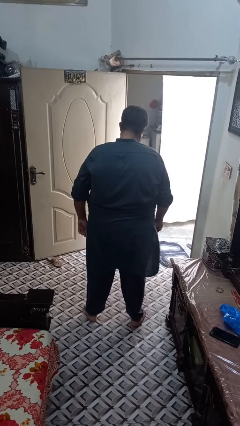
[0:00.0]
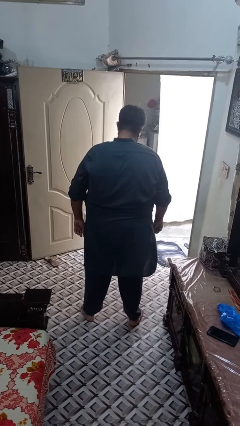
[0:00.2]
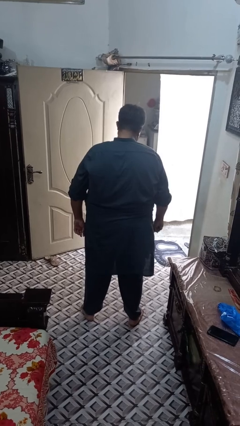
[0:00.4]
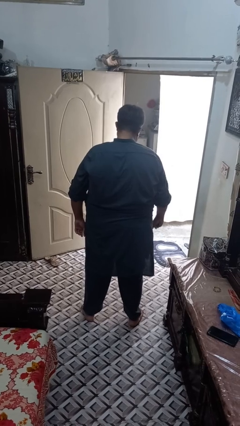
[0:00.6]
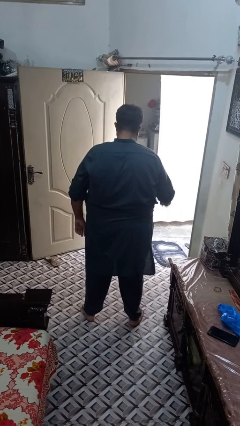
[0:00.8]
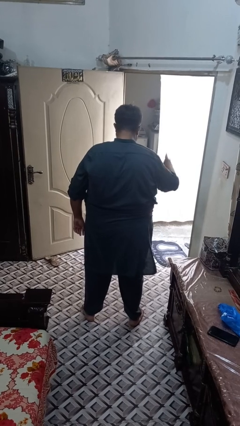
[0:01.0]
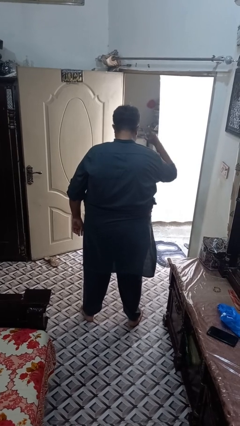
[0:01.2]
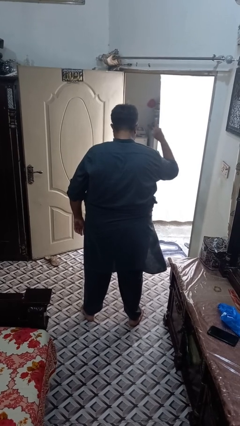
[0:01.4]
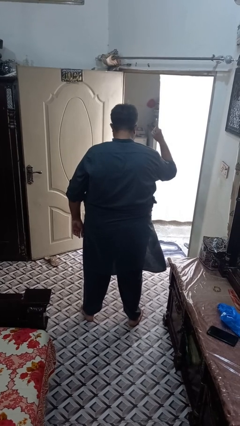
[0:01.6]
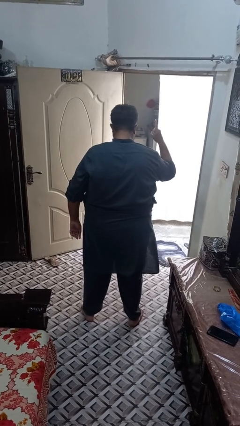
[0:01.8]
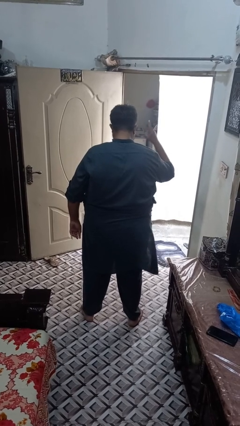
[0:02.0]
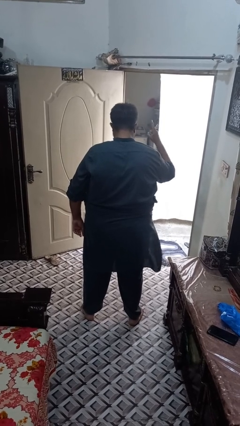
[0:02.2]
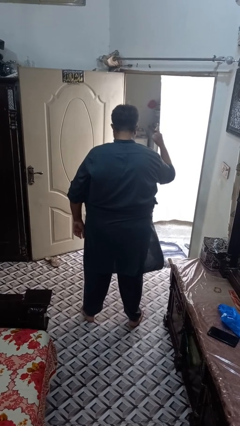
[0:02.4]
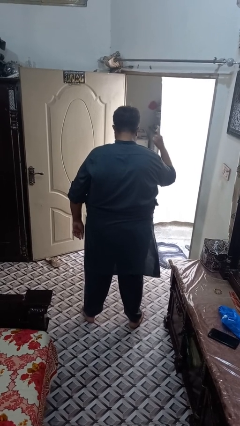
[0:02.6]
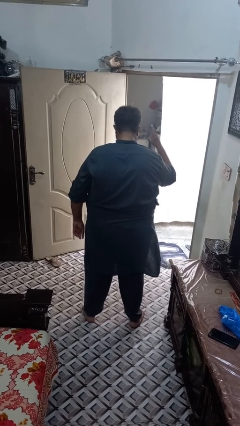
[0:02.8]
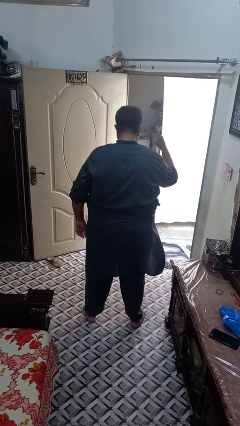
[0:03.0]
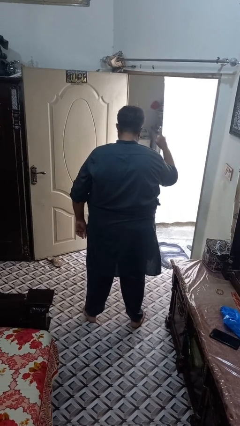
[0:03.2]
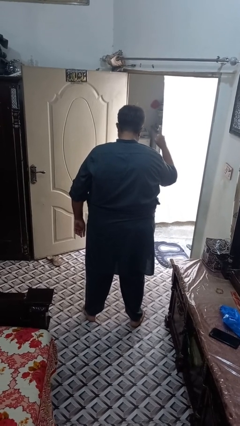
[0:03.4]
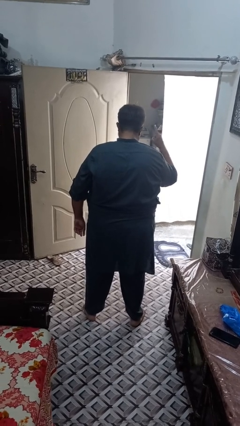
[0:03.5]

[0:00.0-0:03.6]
person gestures number one

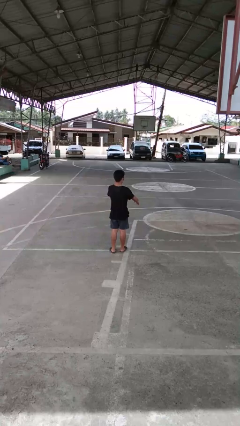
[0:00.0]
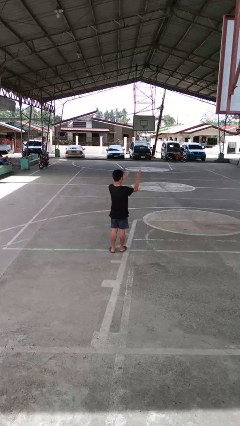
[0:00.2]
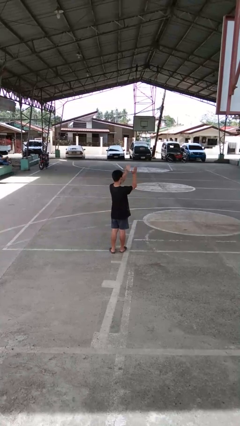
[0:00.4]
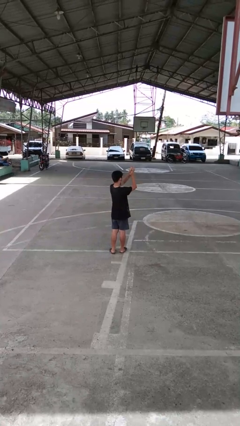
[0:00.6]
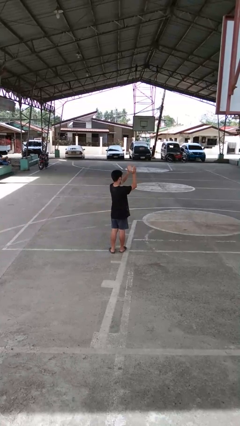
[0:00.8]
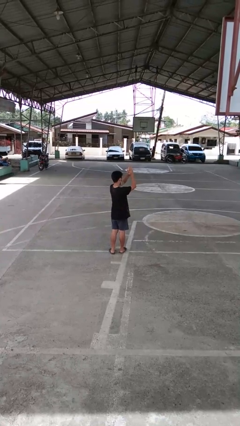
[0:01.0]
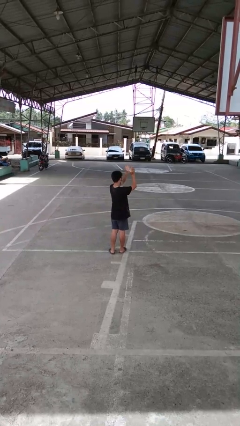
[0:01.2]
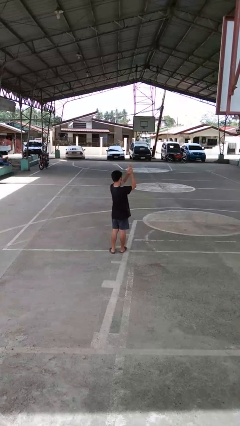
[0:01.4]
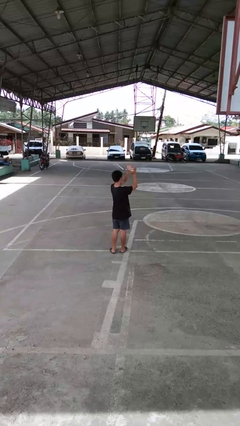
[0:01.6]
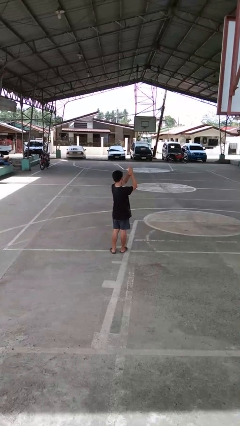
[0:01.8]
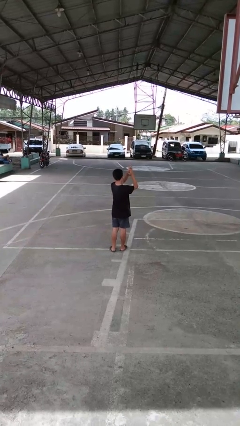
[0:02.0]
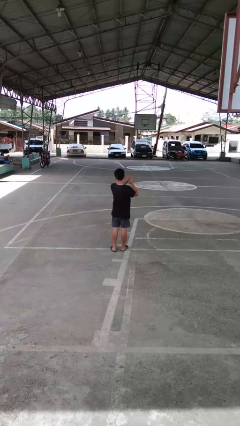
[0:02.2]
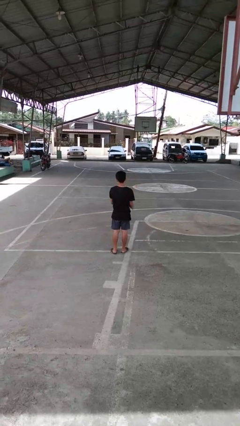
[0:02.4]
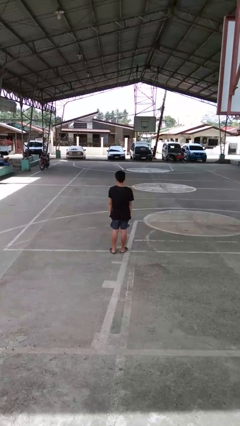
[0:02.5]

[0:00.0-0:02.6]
person claps hands

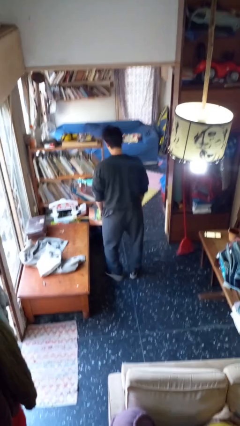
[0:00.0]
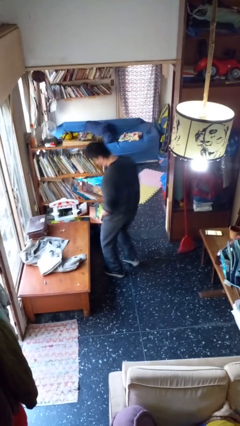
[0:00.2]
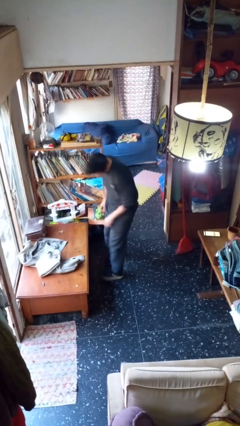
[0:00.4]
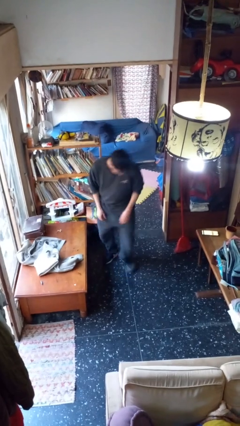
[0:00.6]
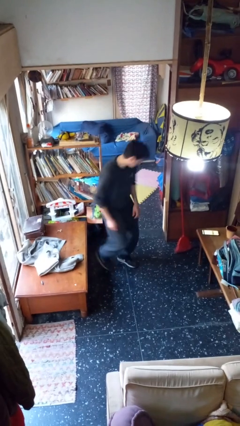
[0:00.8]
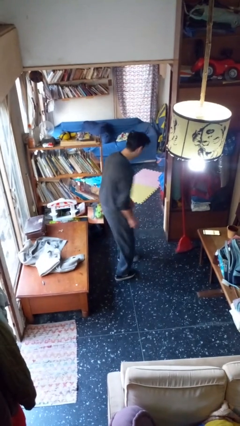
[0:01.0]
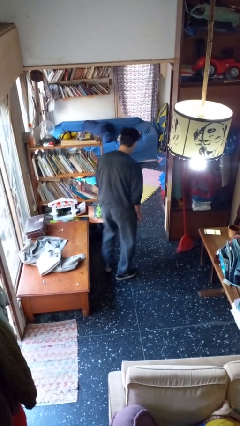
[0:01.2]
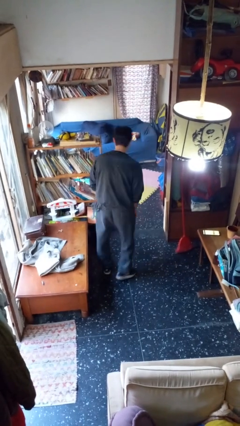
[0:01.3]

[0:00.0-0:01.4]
person twirls

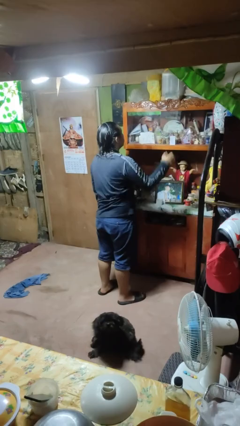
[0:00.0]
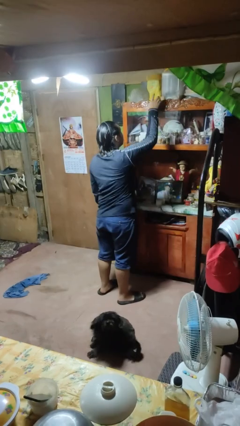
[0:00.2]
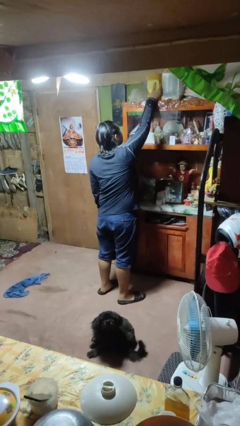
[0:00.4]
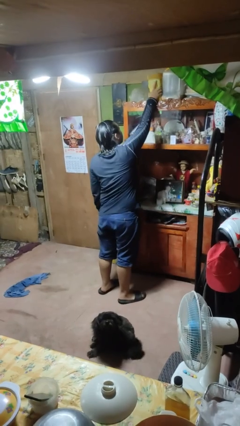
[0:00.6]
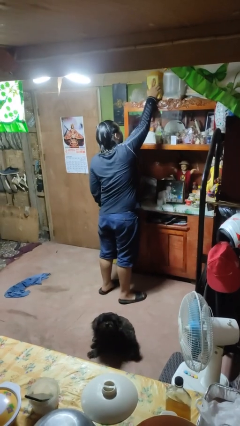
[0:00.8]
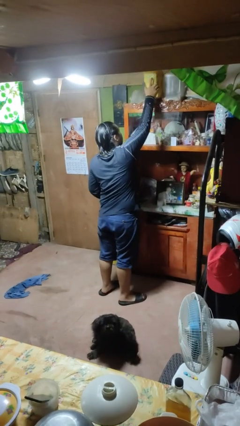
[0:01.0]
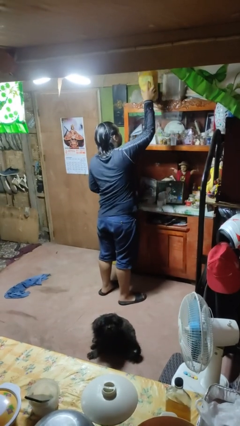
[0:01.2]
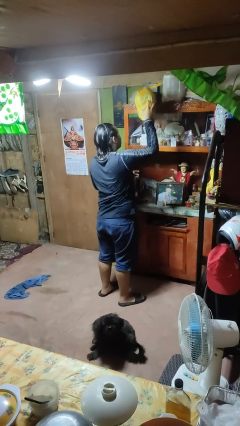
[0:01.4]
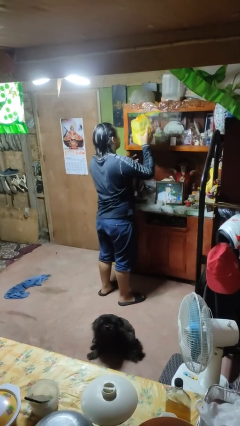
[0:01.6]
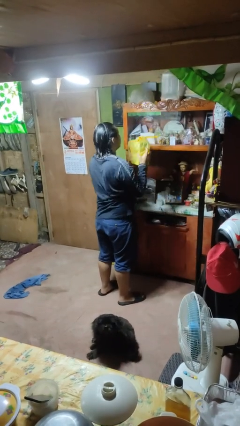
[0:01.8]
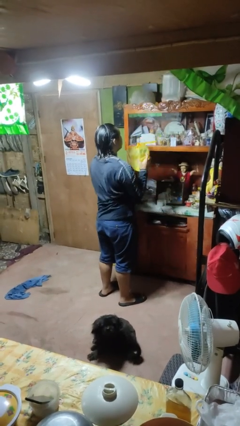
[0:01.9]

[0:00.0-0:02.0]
person picks up object from shelf

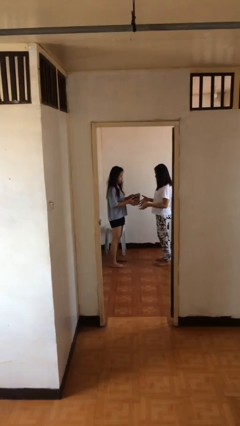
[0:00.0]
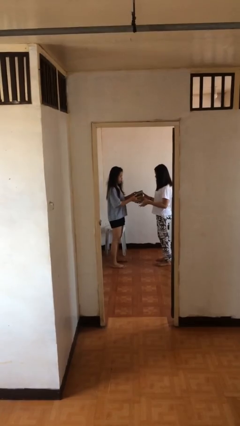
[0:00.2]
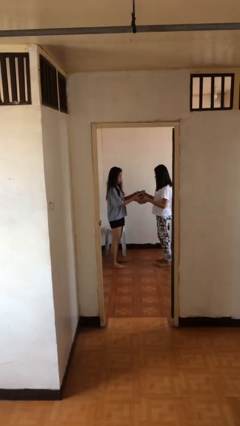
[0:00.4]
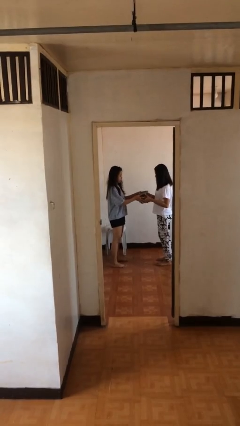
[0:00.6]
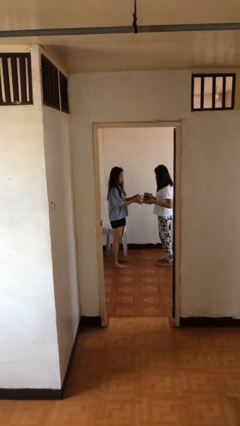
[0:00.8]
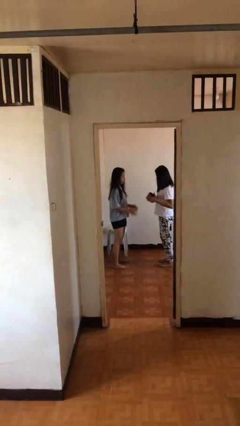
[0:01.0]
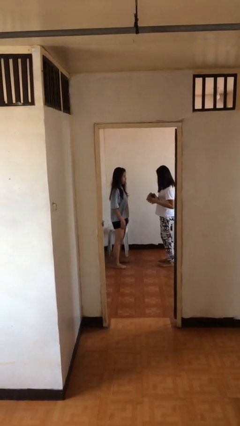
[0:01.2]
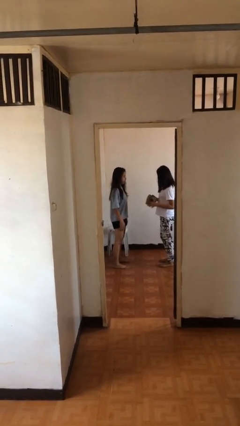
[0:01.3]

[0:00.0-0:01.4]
person transfers object to person

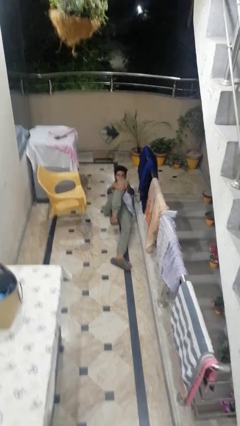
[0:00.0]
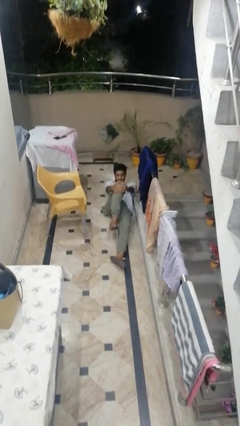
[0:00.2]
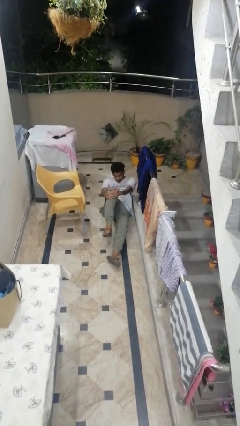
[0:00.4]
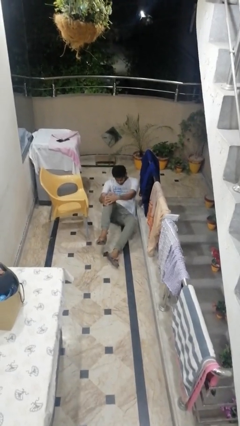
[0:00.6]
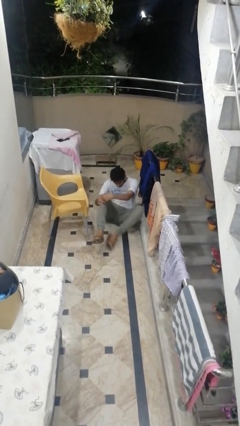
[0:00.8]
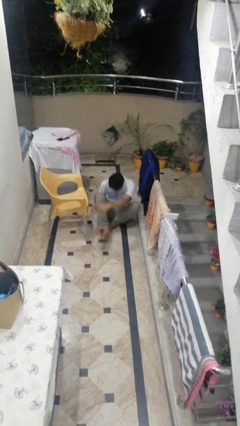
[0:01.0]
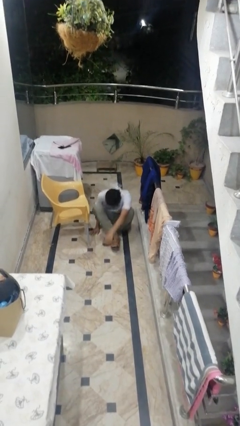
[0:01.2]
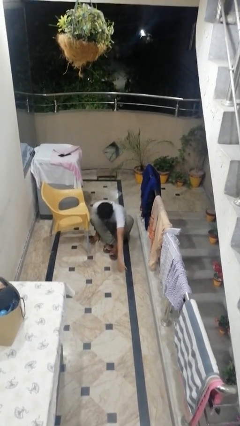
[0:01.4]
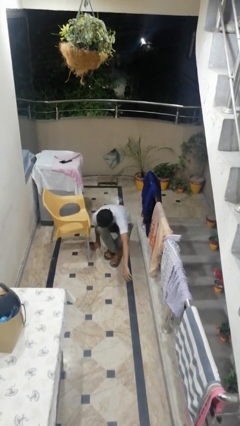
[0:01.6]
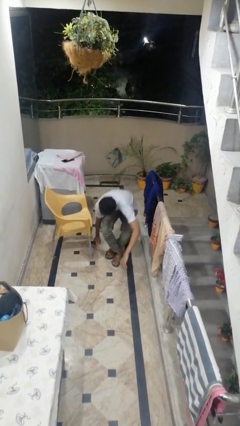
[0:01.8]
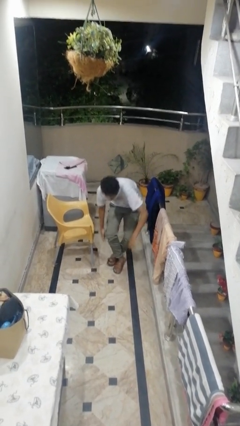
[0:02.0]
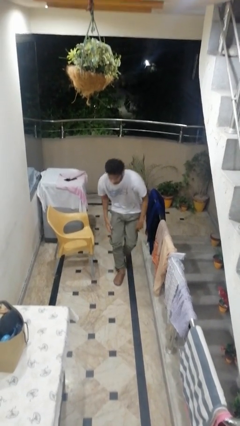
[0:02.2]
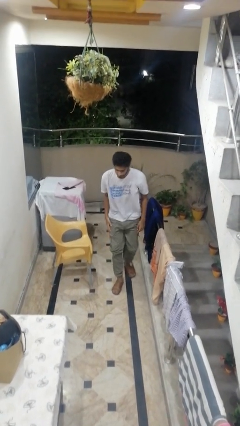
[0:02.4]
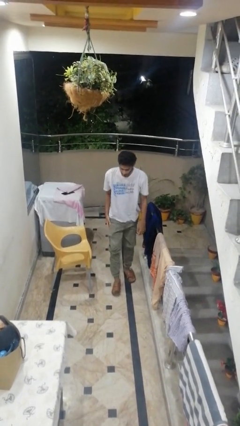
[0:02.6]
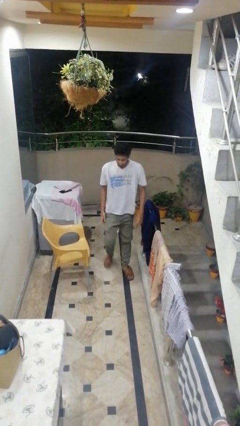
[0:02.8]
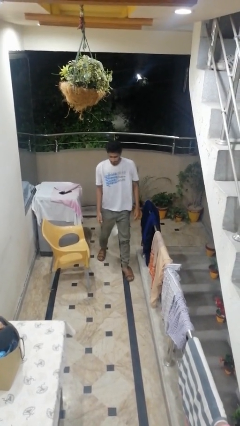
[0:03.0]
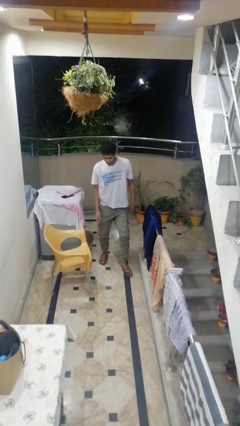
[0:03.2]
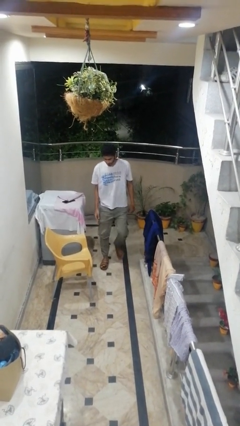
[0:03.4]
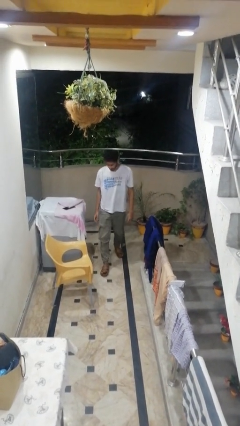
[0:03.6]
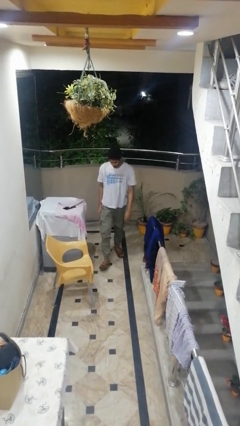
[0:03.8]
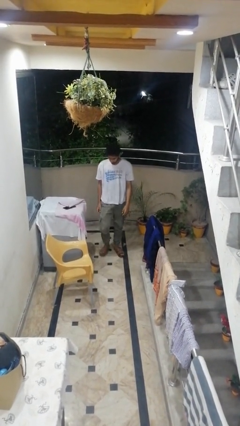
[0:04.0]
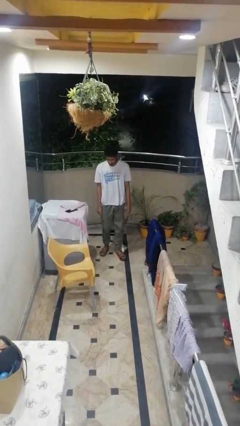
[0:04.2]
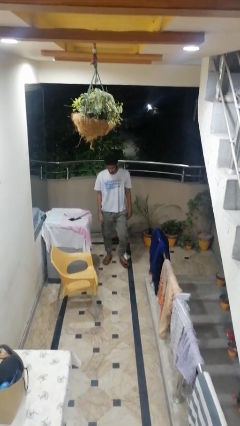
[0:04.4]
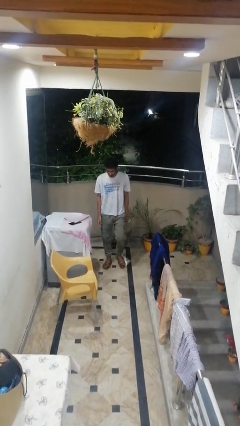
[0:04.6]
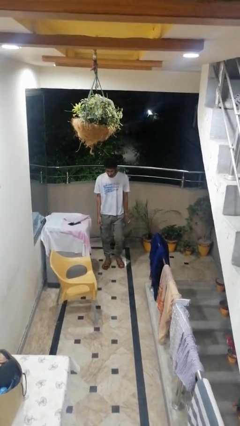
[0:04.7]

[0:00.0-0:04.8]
person stands up from floor

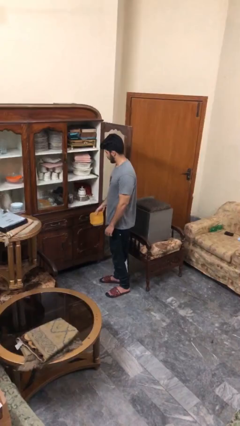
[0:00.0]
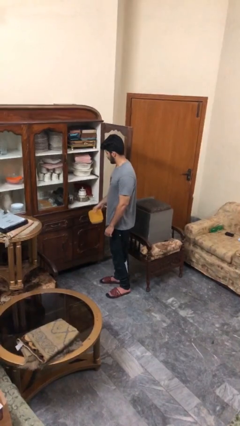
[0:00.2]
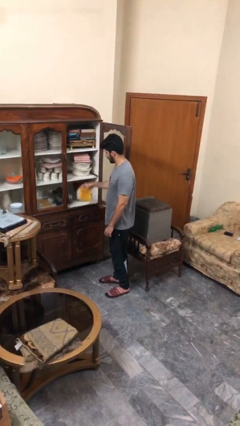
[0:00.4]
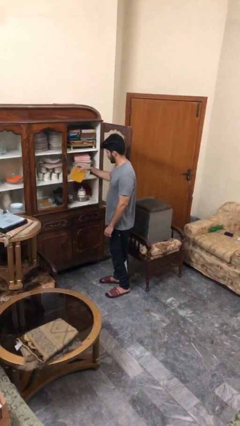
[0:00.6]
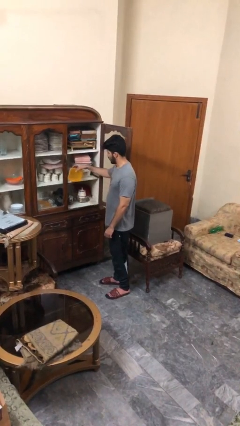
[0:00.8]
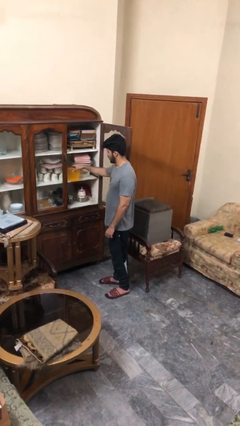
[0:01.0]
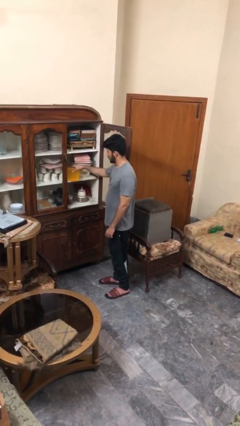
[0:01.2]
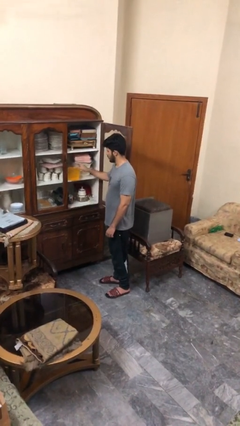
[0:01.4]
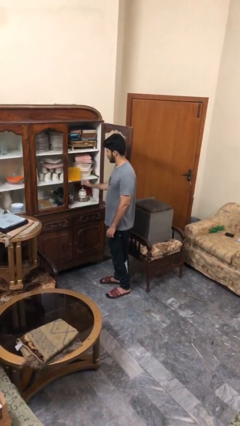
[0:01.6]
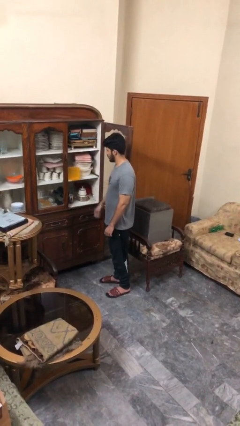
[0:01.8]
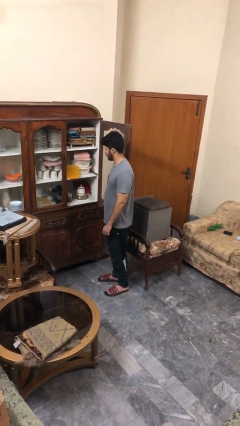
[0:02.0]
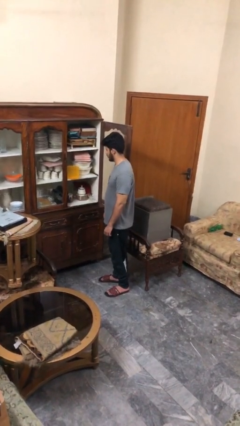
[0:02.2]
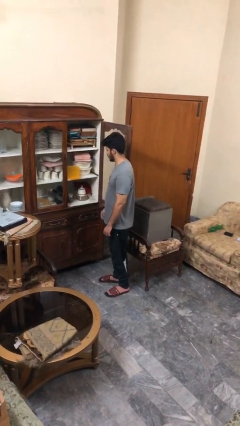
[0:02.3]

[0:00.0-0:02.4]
person puts down object into cabinet
